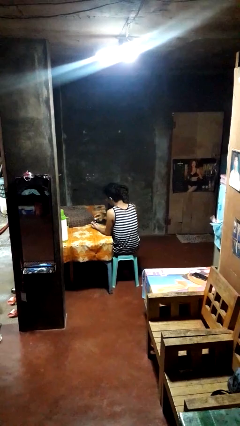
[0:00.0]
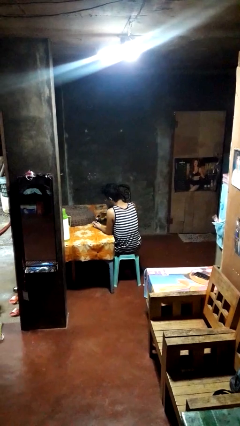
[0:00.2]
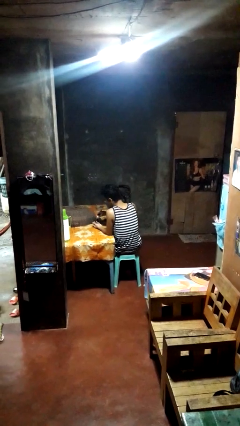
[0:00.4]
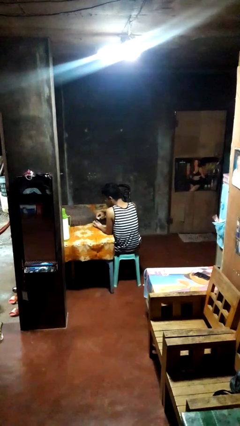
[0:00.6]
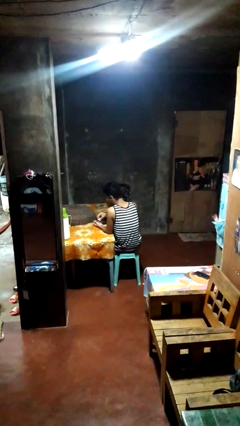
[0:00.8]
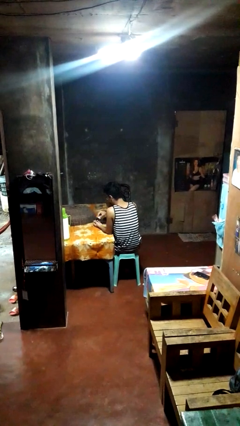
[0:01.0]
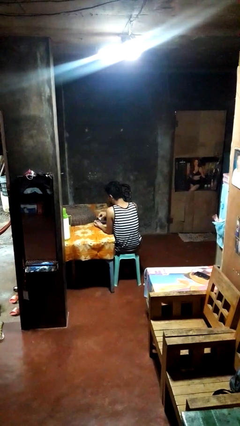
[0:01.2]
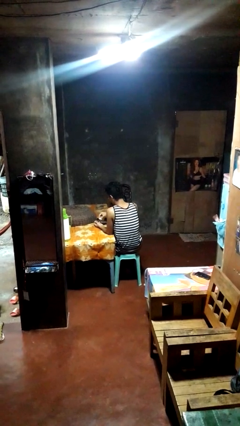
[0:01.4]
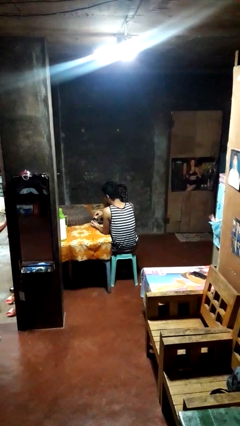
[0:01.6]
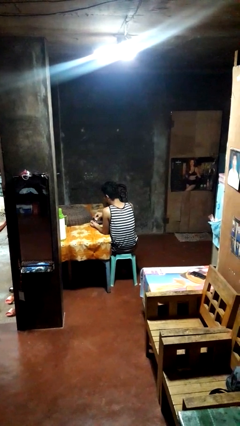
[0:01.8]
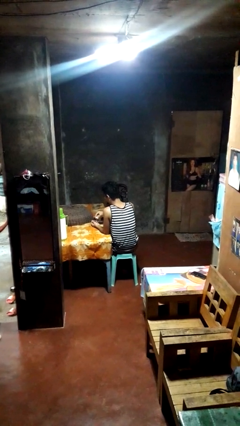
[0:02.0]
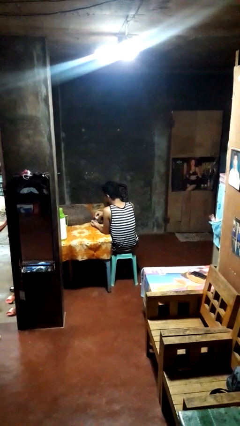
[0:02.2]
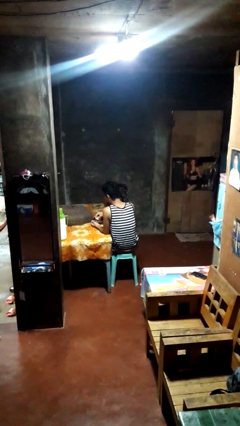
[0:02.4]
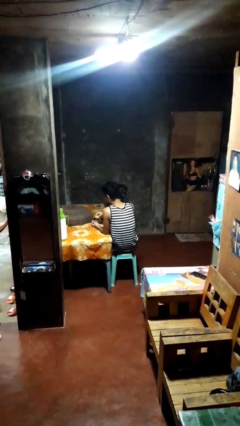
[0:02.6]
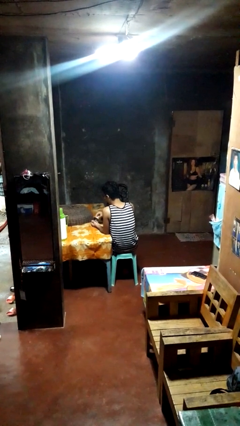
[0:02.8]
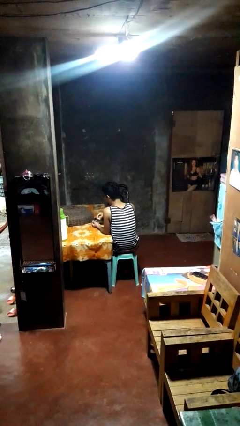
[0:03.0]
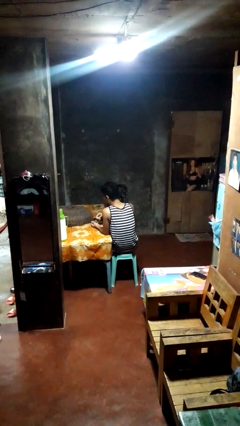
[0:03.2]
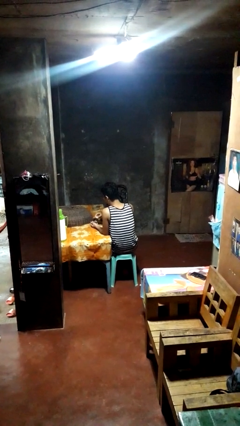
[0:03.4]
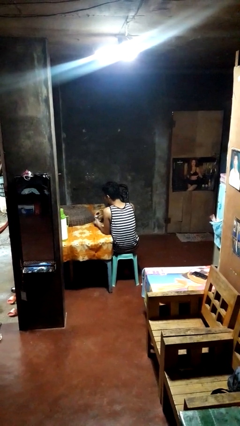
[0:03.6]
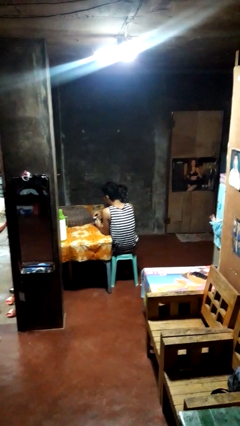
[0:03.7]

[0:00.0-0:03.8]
person paints fingernails

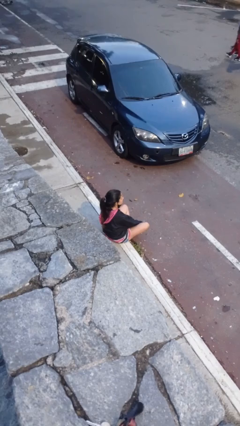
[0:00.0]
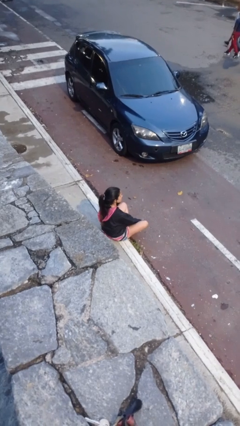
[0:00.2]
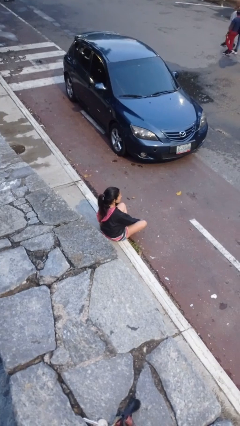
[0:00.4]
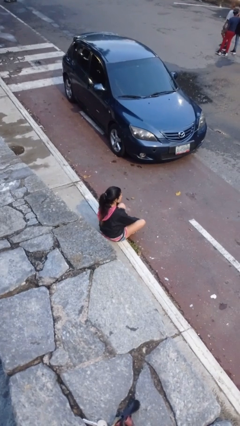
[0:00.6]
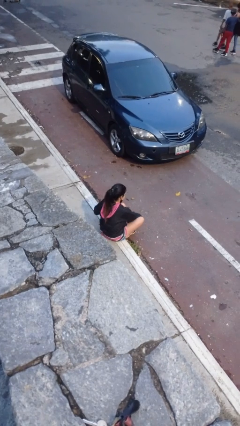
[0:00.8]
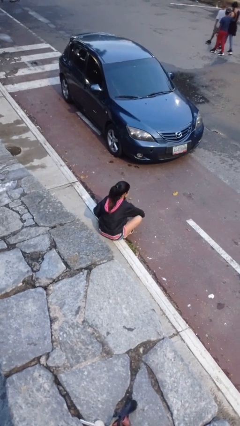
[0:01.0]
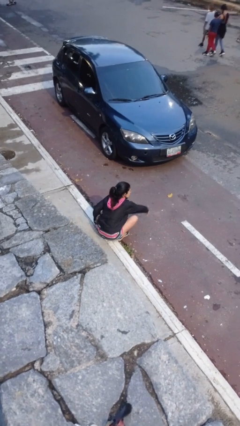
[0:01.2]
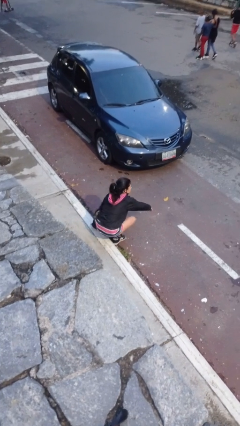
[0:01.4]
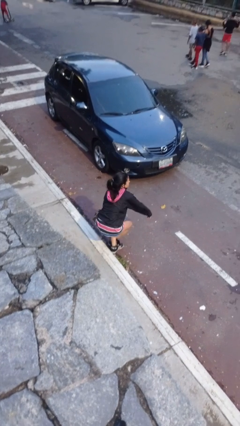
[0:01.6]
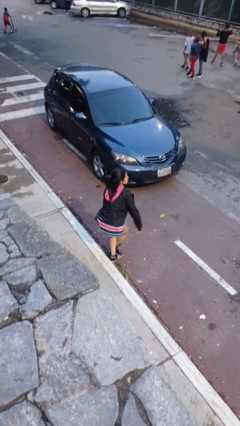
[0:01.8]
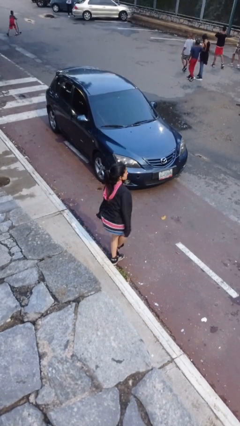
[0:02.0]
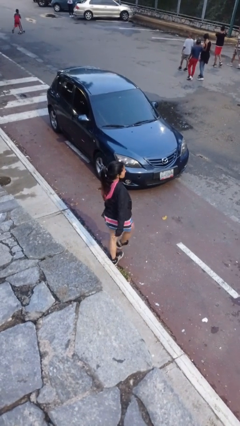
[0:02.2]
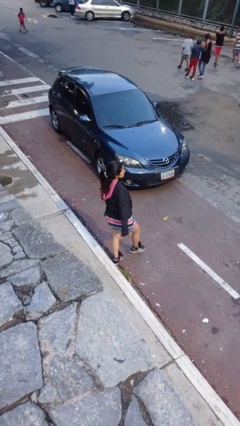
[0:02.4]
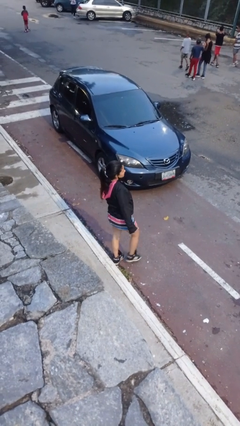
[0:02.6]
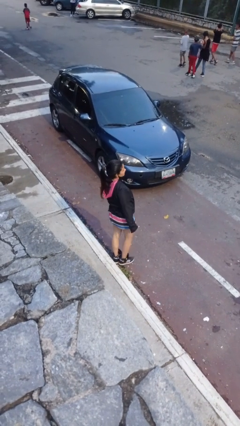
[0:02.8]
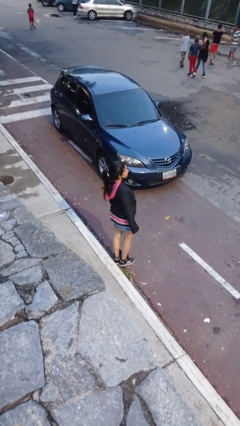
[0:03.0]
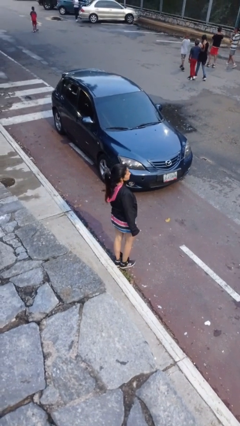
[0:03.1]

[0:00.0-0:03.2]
person stands up from floor

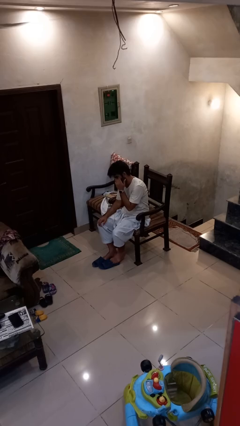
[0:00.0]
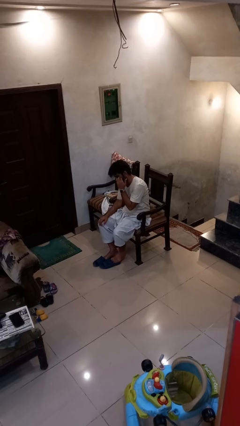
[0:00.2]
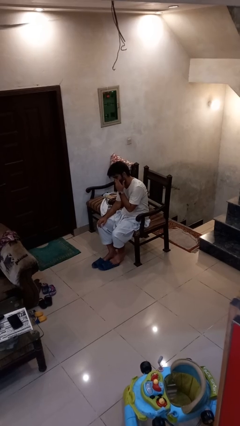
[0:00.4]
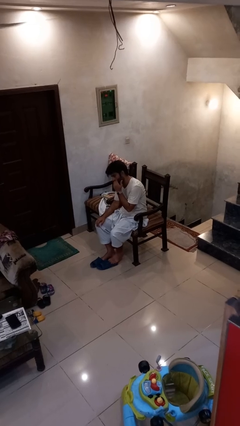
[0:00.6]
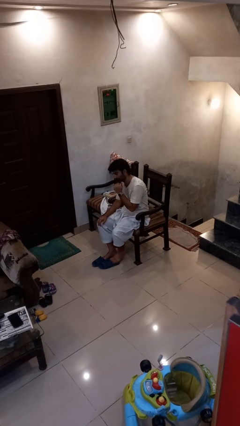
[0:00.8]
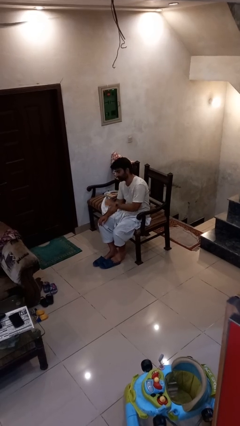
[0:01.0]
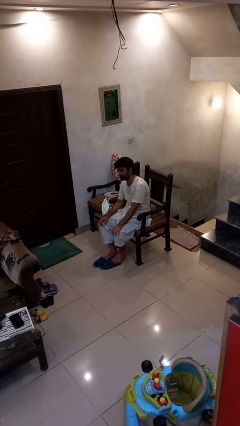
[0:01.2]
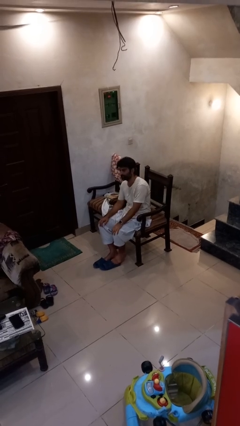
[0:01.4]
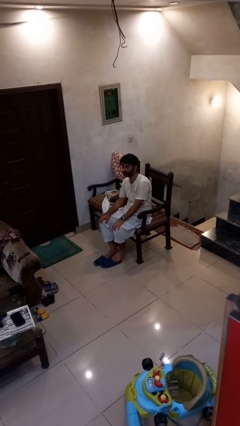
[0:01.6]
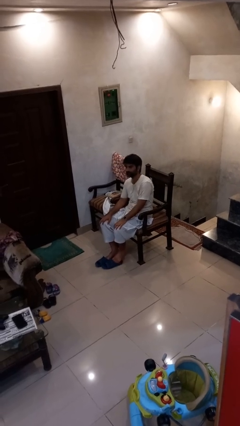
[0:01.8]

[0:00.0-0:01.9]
person cracks knuckles

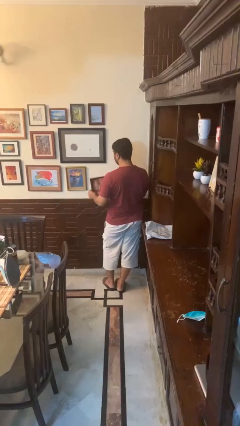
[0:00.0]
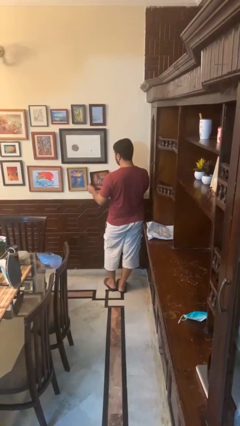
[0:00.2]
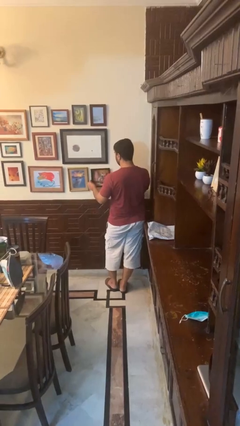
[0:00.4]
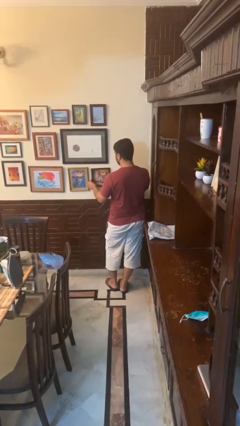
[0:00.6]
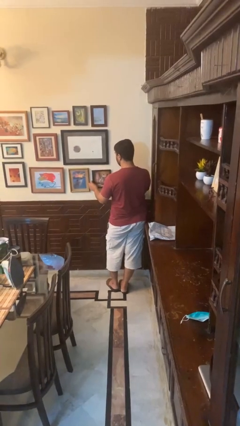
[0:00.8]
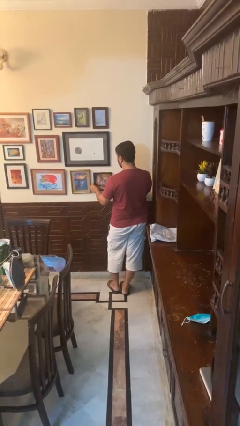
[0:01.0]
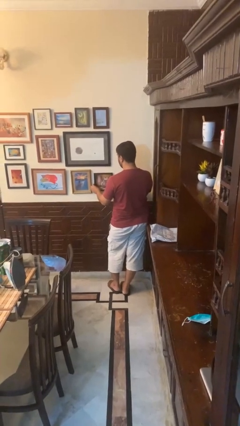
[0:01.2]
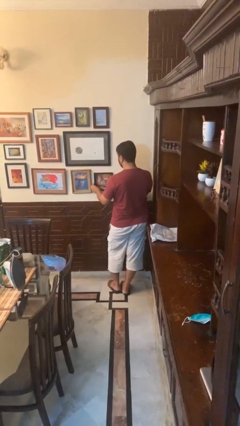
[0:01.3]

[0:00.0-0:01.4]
person puts up picture frame

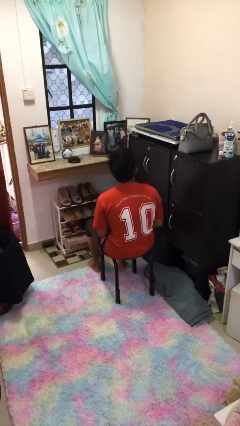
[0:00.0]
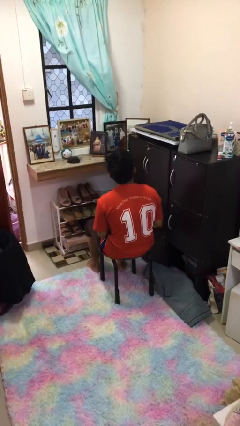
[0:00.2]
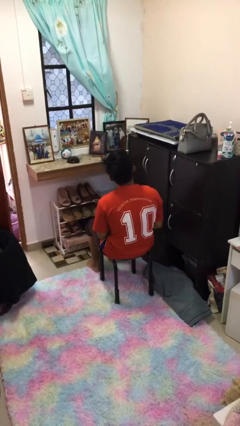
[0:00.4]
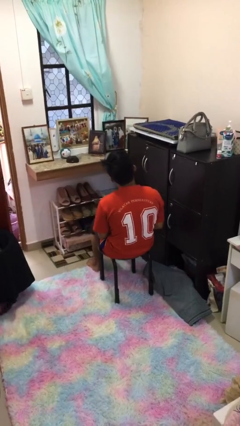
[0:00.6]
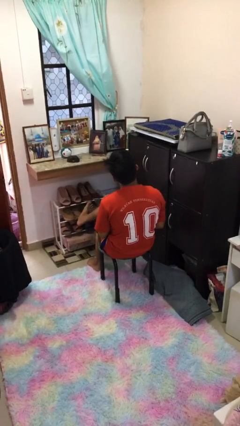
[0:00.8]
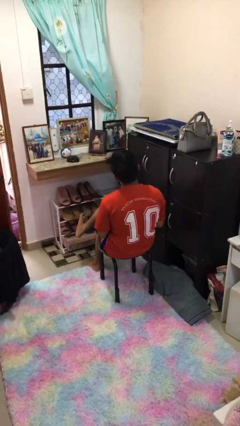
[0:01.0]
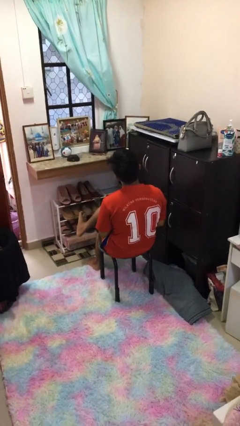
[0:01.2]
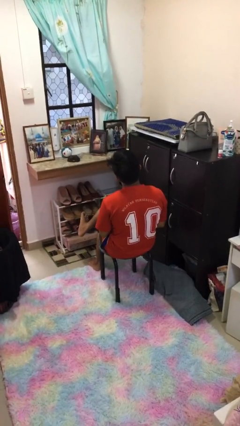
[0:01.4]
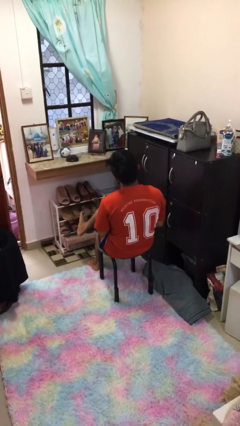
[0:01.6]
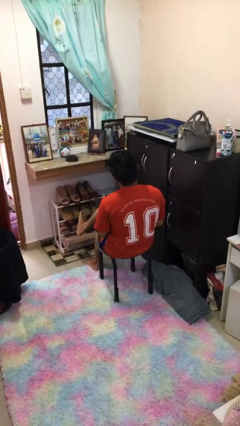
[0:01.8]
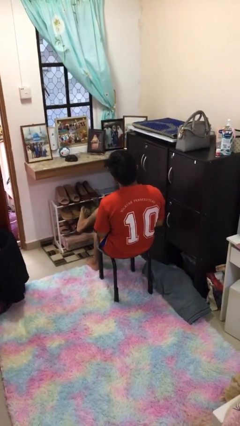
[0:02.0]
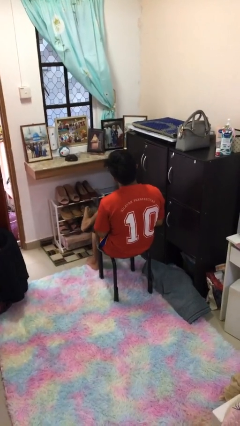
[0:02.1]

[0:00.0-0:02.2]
person crosses legs

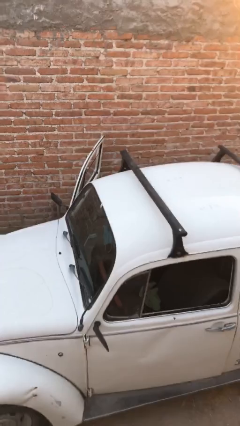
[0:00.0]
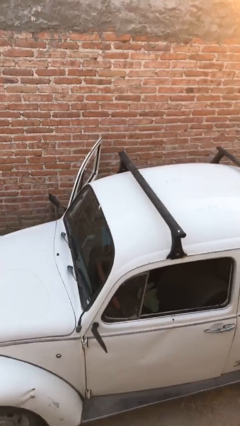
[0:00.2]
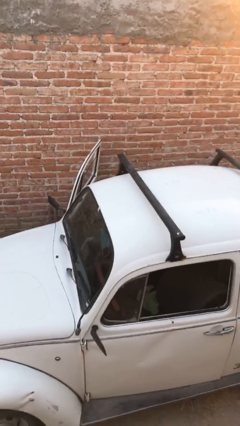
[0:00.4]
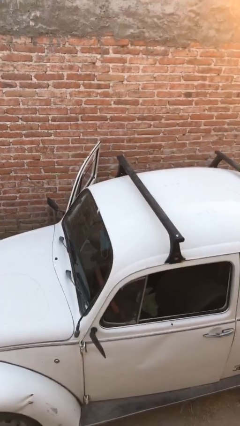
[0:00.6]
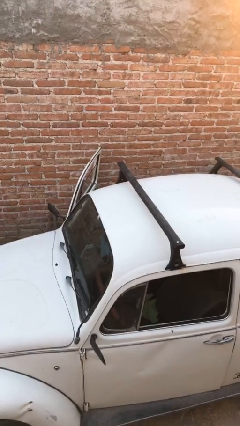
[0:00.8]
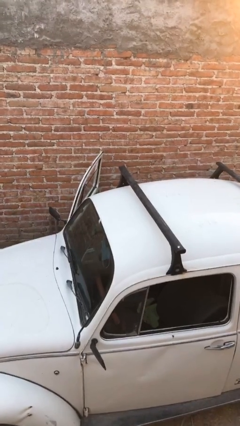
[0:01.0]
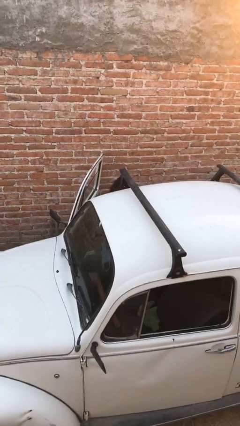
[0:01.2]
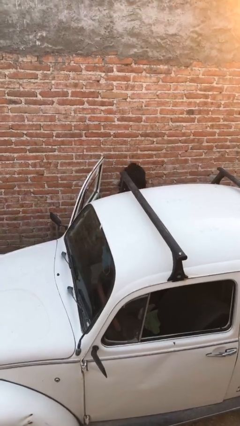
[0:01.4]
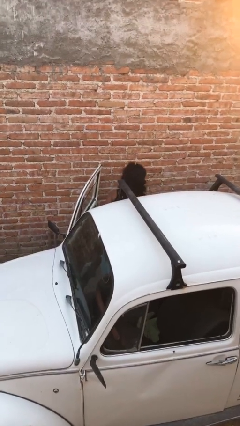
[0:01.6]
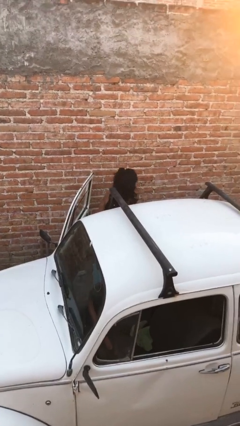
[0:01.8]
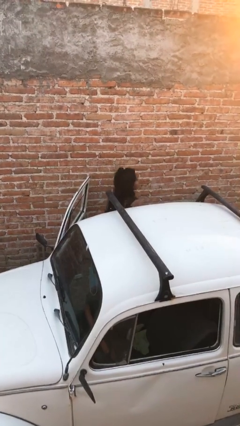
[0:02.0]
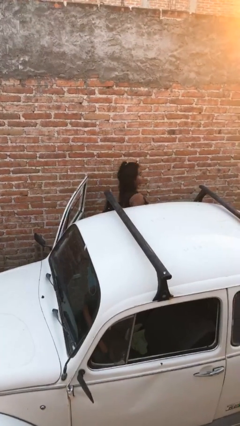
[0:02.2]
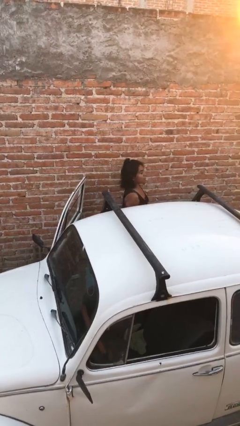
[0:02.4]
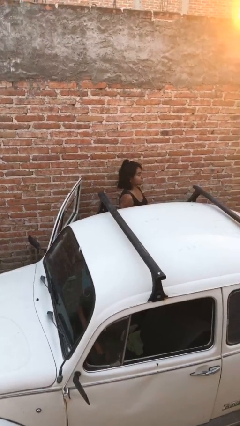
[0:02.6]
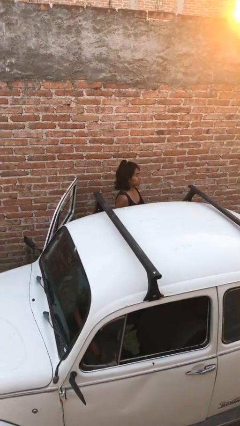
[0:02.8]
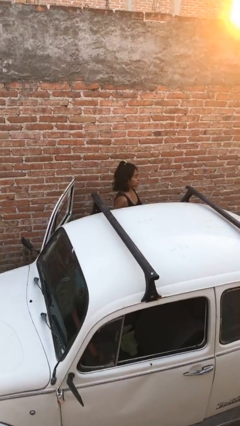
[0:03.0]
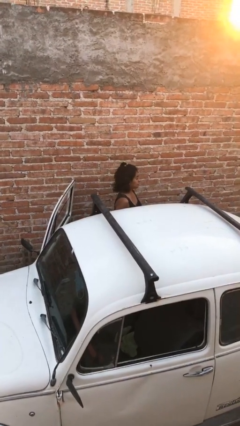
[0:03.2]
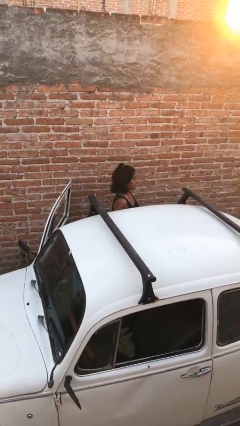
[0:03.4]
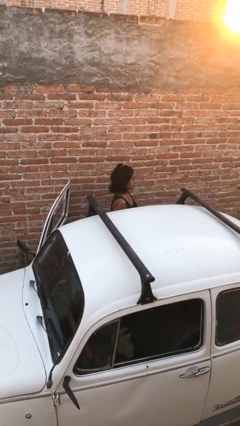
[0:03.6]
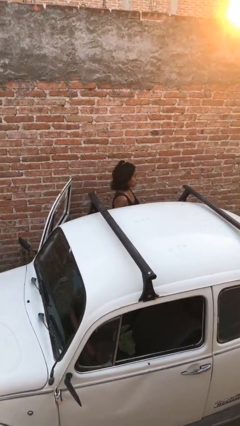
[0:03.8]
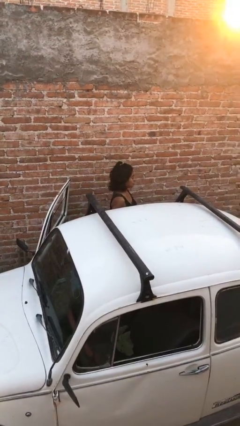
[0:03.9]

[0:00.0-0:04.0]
person exits car

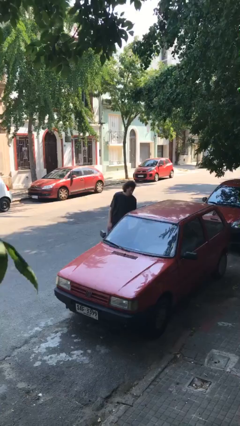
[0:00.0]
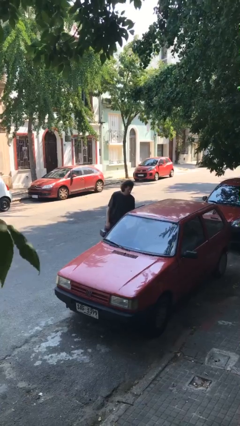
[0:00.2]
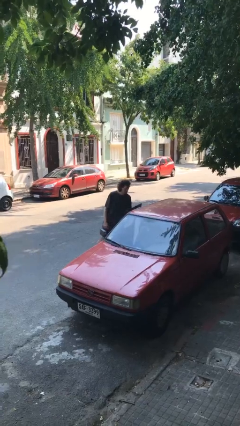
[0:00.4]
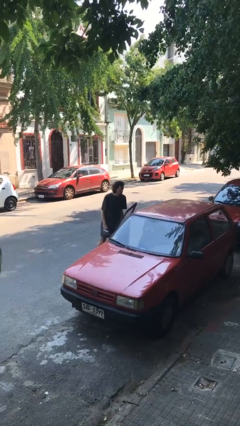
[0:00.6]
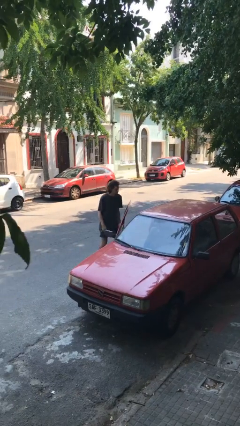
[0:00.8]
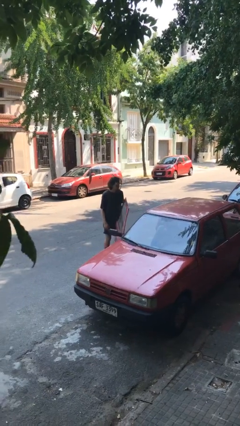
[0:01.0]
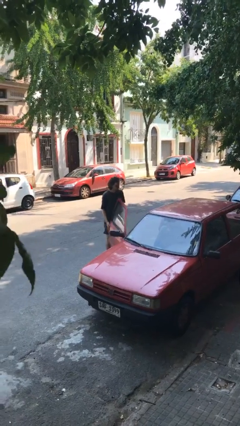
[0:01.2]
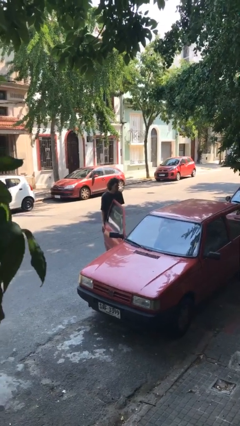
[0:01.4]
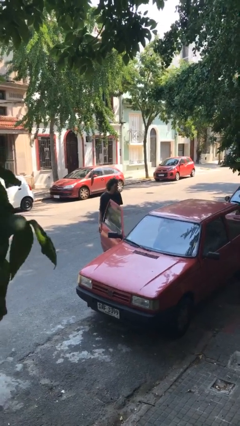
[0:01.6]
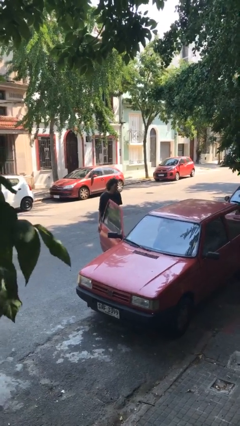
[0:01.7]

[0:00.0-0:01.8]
person opens car door
